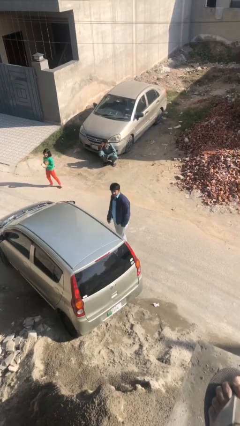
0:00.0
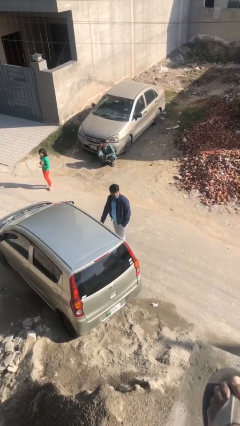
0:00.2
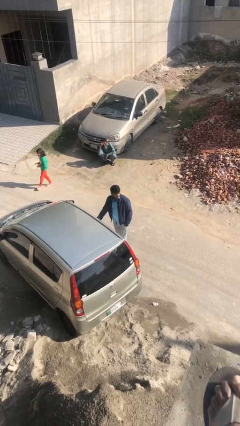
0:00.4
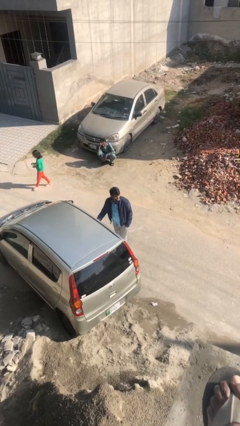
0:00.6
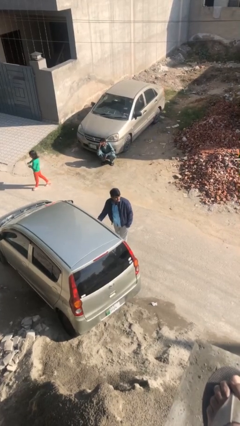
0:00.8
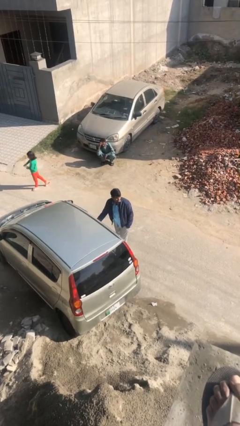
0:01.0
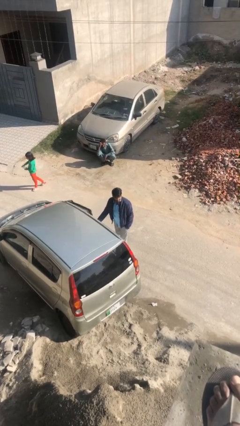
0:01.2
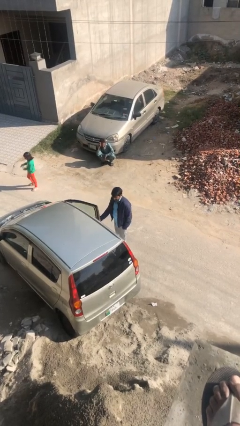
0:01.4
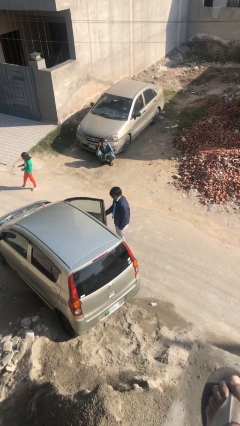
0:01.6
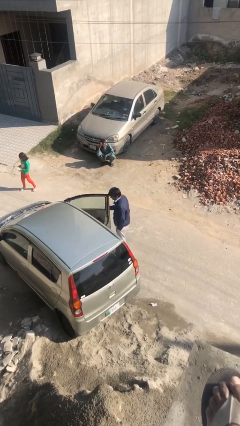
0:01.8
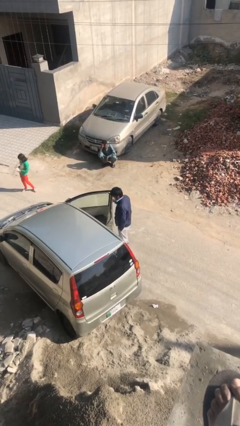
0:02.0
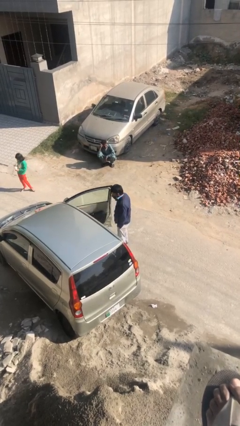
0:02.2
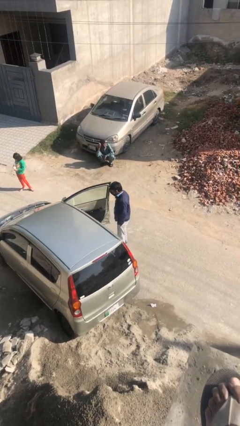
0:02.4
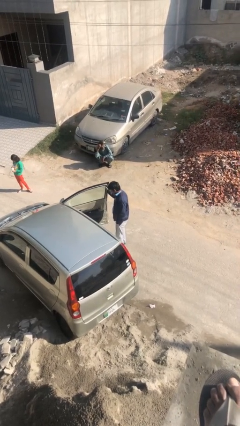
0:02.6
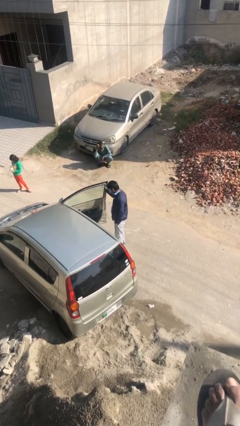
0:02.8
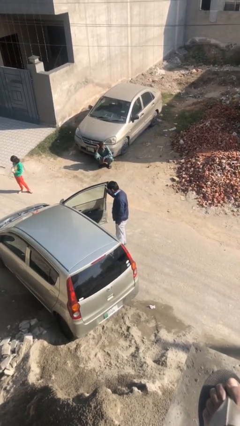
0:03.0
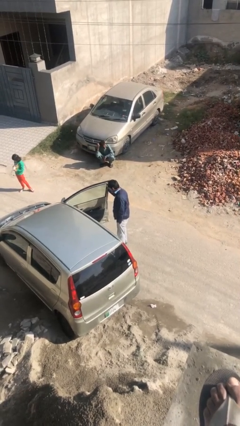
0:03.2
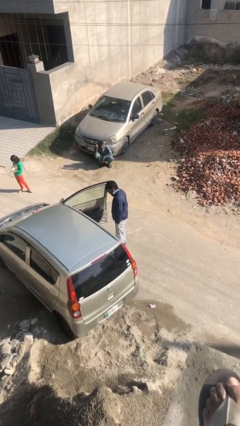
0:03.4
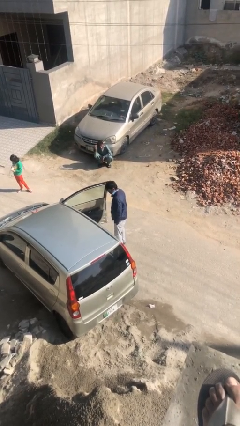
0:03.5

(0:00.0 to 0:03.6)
person opens car door

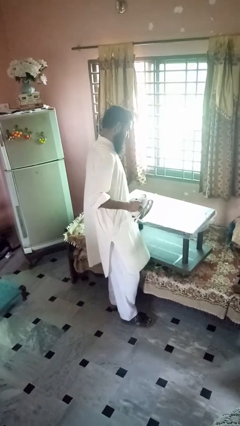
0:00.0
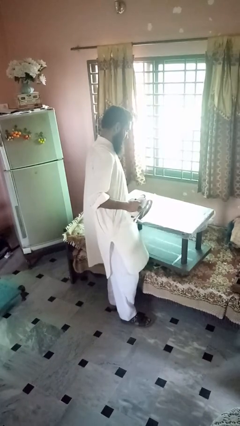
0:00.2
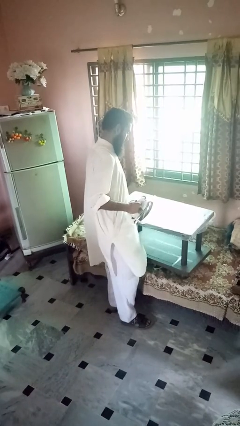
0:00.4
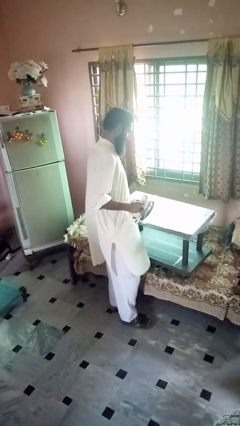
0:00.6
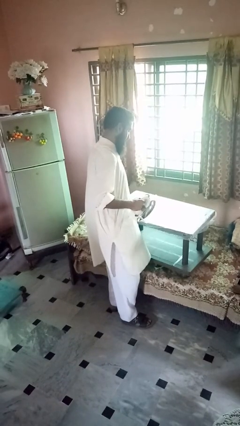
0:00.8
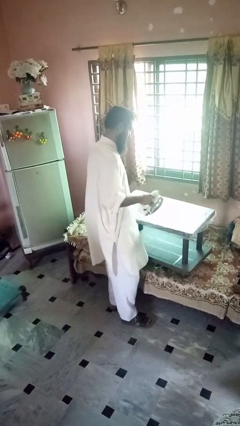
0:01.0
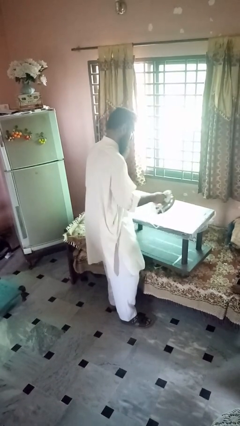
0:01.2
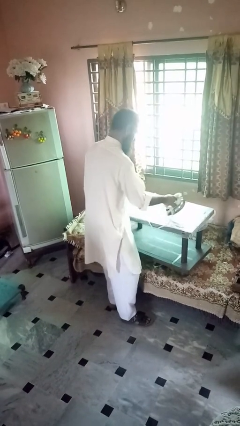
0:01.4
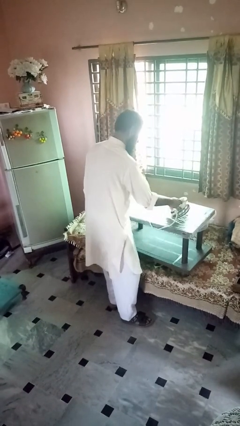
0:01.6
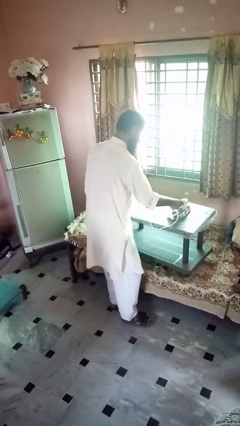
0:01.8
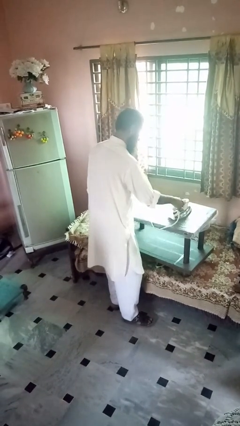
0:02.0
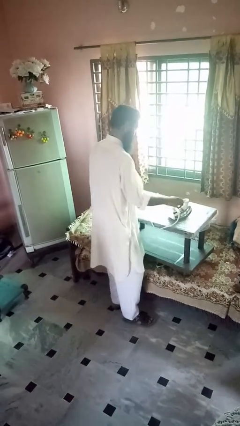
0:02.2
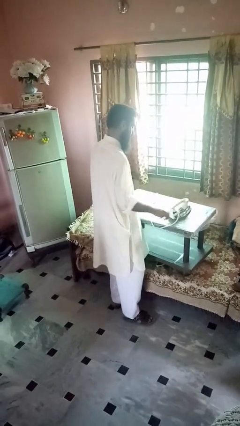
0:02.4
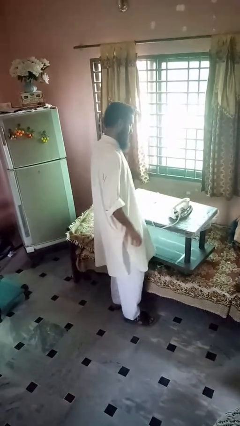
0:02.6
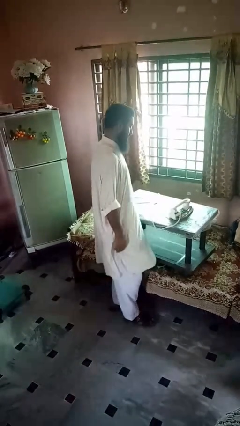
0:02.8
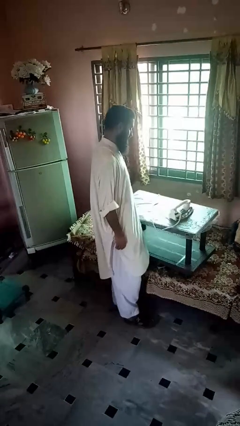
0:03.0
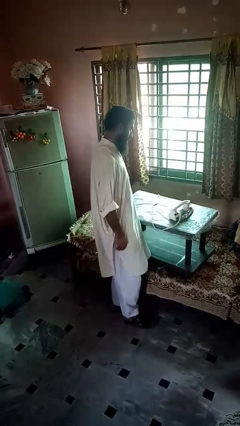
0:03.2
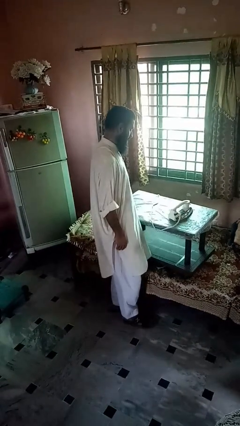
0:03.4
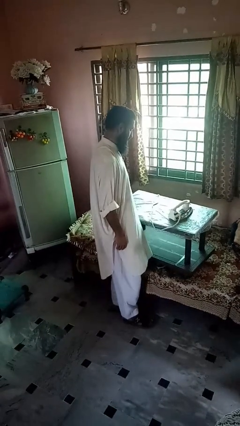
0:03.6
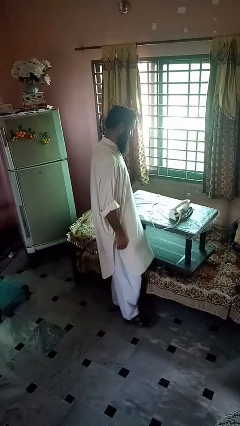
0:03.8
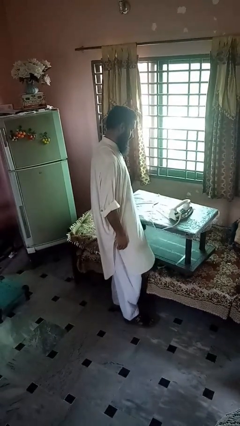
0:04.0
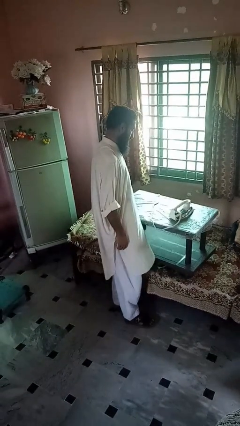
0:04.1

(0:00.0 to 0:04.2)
person puts down object on countertop

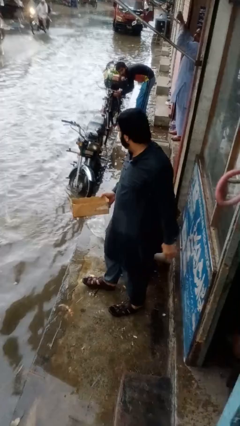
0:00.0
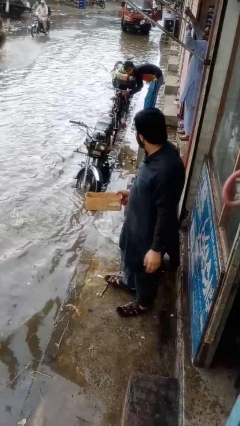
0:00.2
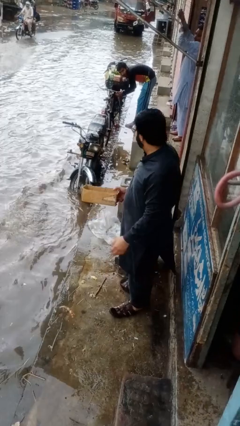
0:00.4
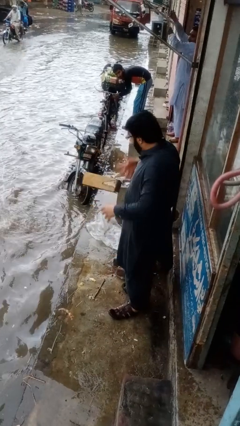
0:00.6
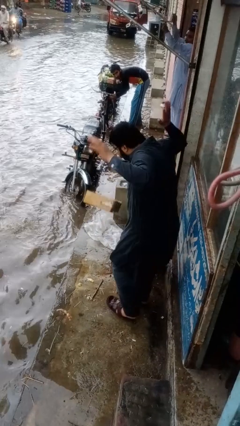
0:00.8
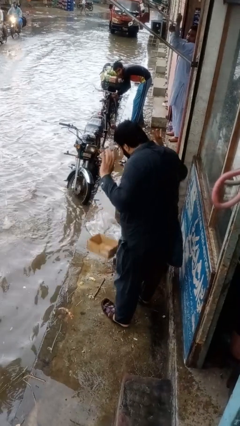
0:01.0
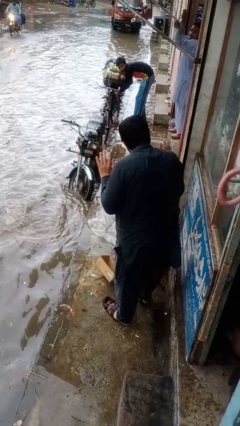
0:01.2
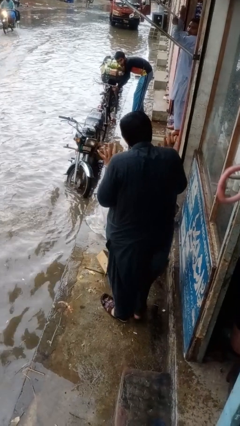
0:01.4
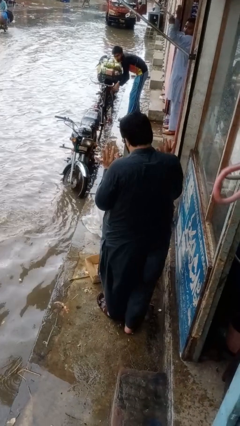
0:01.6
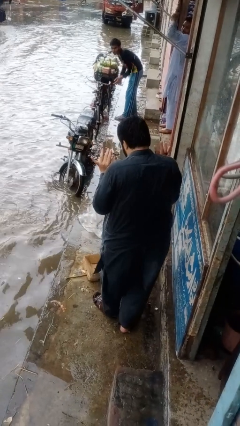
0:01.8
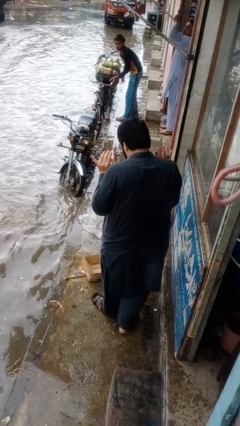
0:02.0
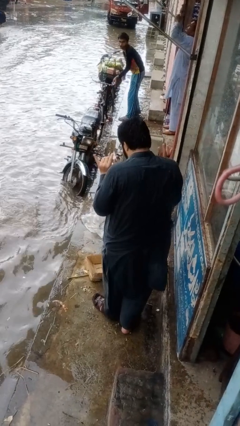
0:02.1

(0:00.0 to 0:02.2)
person drops object

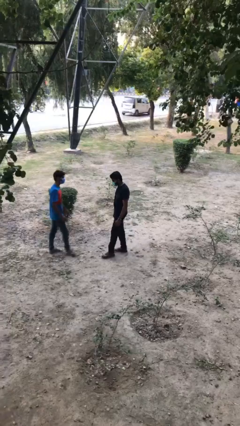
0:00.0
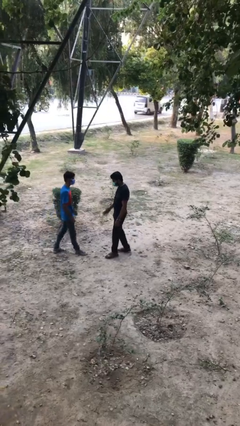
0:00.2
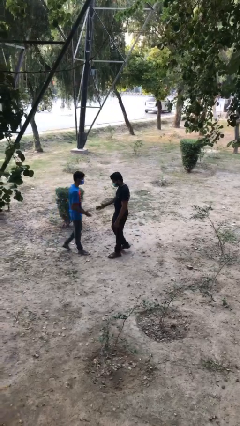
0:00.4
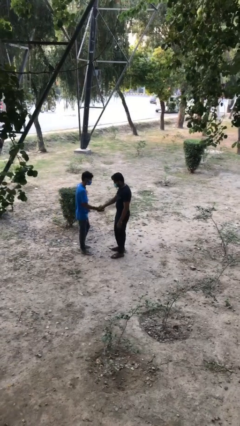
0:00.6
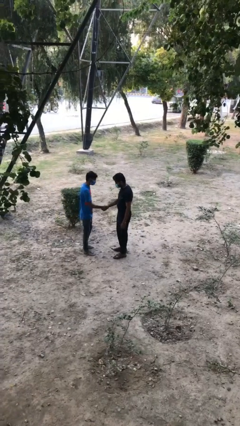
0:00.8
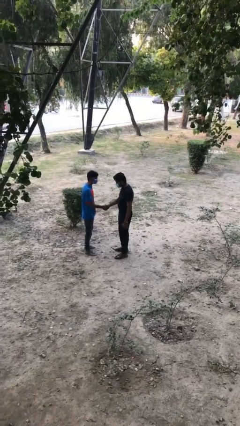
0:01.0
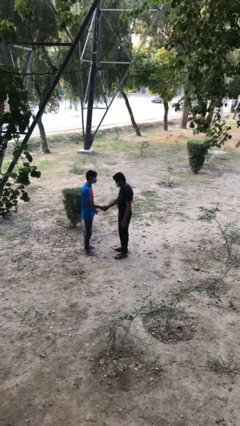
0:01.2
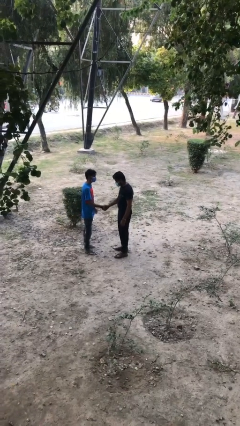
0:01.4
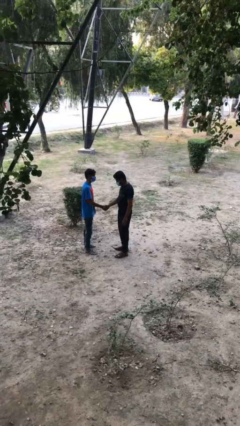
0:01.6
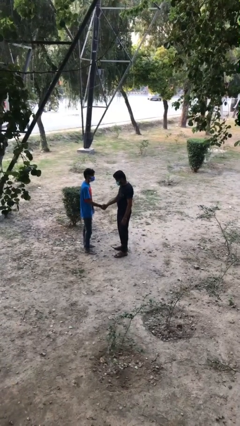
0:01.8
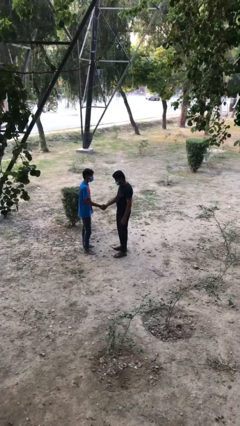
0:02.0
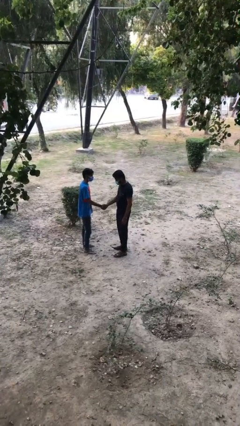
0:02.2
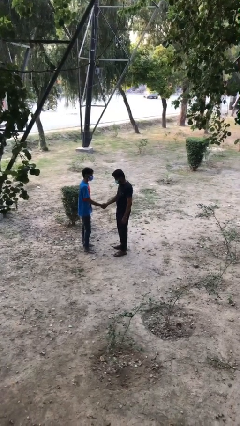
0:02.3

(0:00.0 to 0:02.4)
person shakes hand

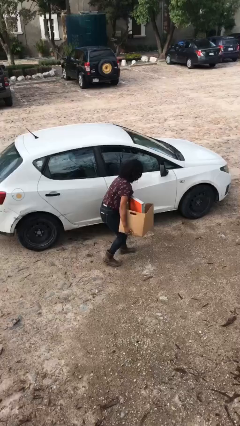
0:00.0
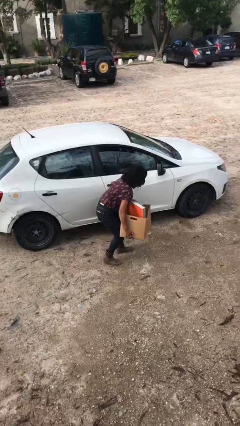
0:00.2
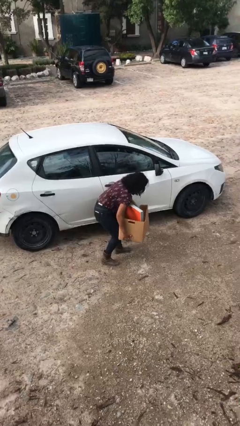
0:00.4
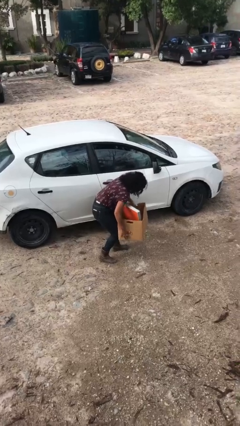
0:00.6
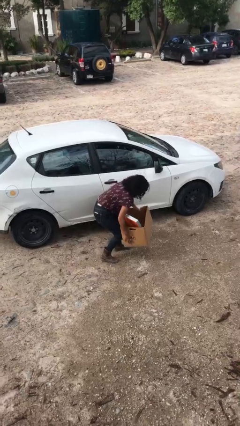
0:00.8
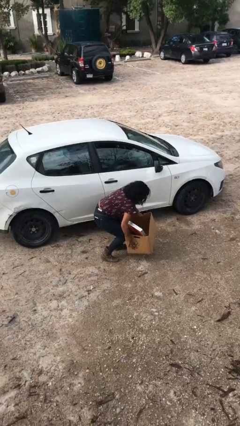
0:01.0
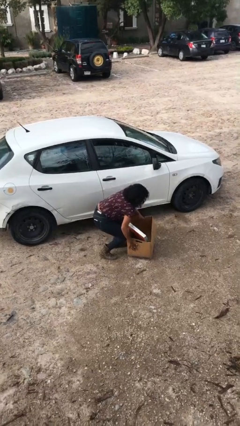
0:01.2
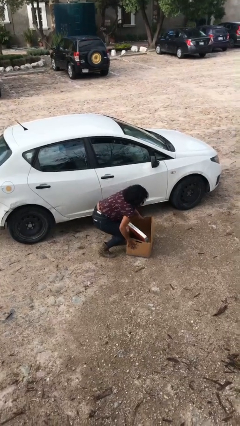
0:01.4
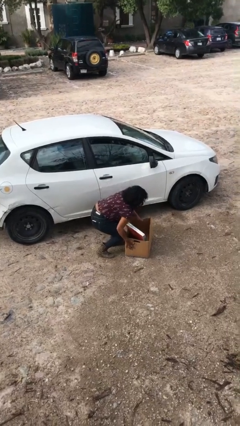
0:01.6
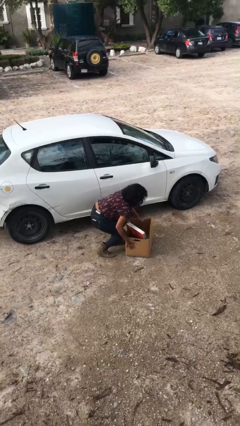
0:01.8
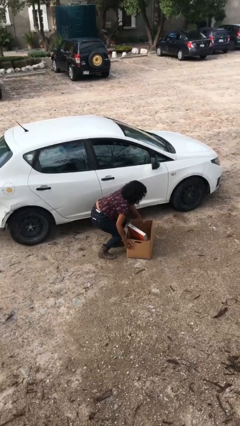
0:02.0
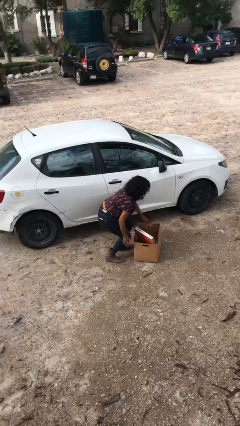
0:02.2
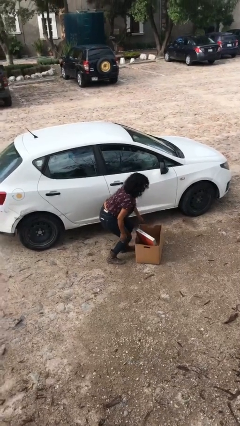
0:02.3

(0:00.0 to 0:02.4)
person puts down object on floor

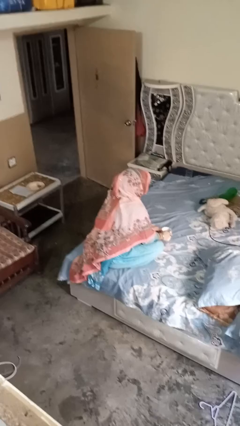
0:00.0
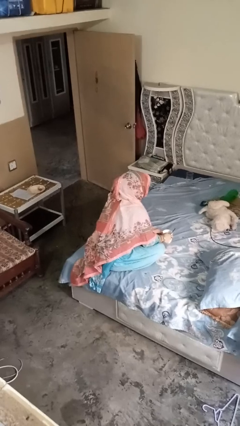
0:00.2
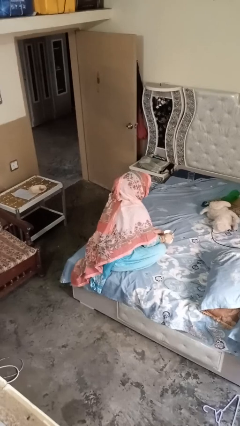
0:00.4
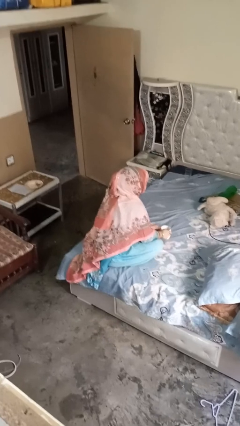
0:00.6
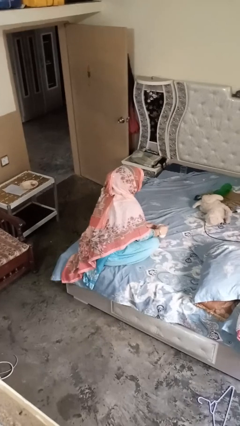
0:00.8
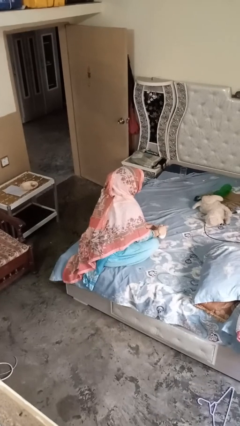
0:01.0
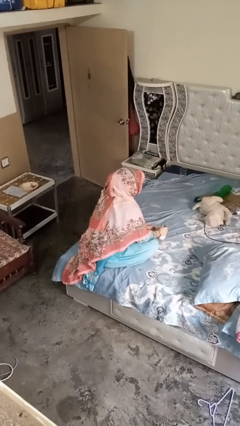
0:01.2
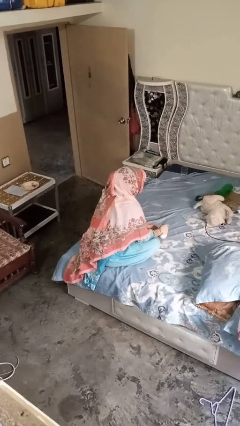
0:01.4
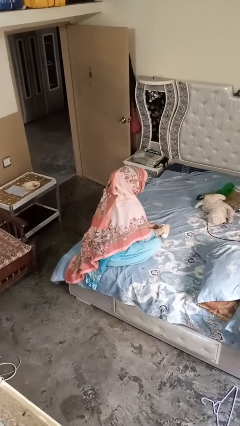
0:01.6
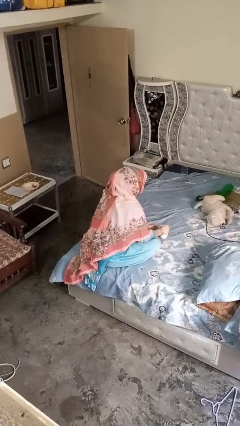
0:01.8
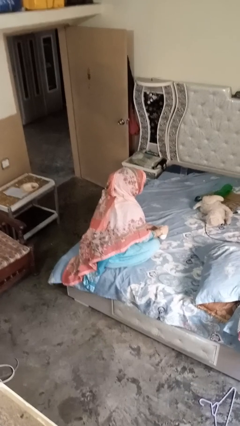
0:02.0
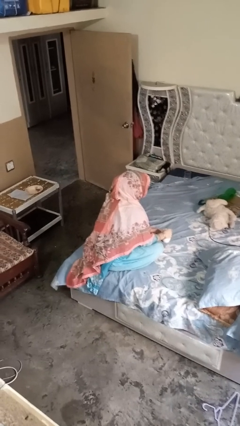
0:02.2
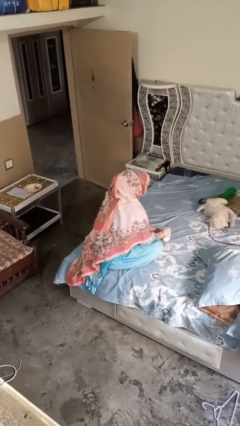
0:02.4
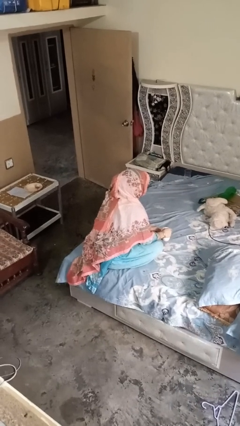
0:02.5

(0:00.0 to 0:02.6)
person stirs mug

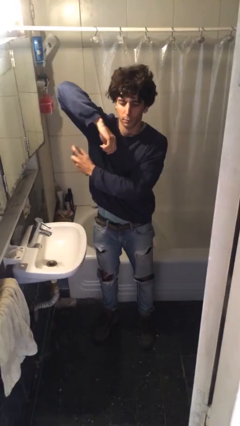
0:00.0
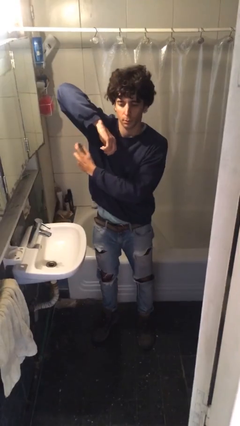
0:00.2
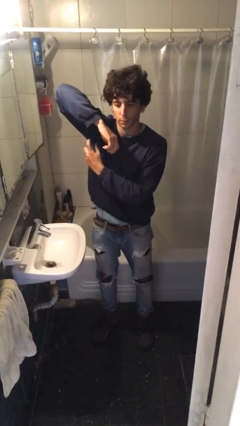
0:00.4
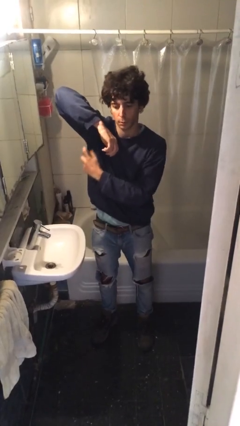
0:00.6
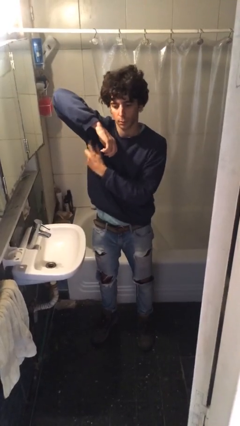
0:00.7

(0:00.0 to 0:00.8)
person applies deodorant
